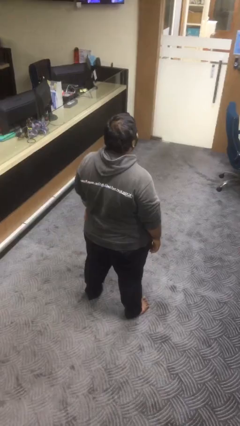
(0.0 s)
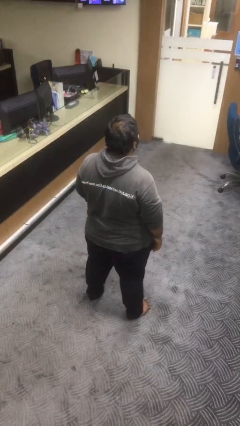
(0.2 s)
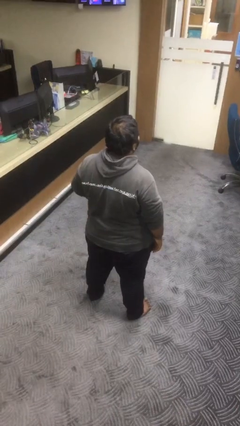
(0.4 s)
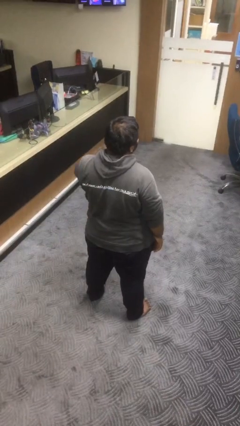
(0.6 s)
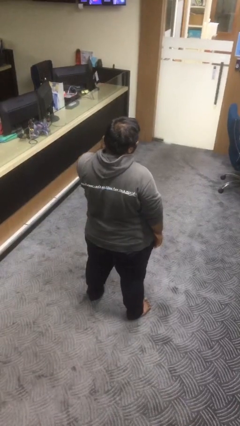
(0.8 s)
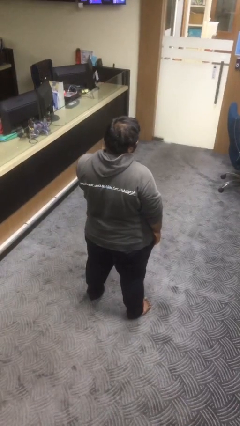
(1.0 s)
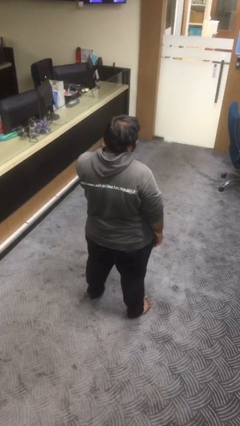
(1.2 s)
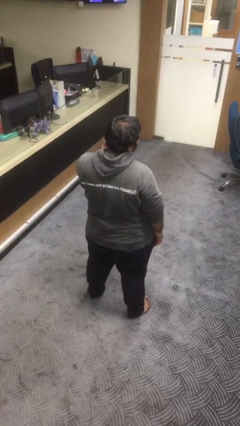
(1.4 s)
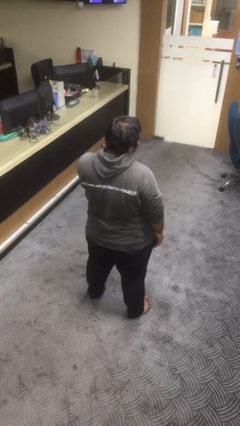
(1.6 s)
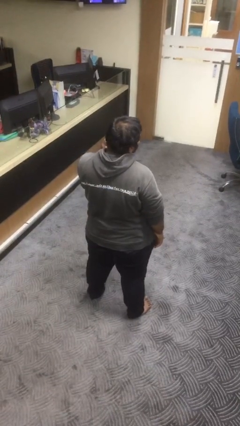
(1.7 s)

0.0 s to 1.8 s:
person rubs neck

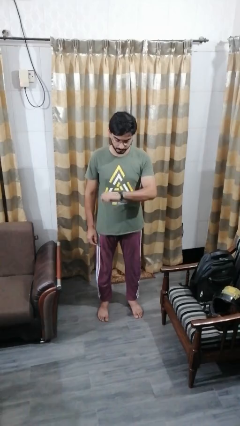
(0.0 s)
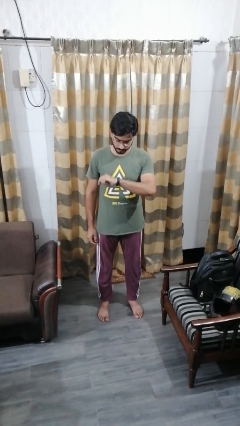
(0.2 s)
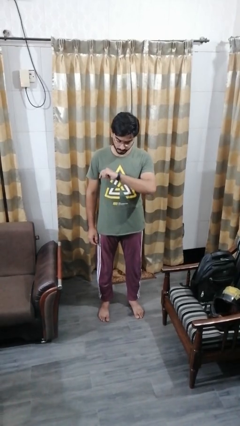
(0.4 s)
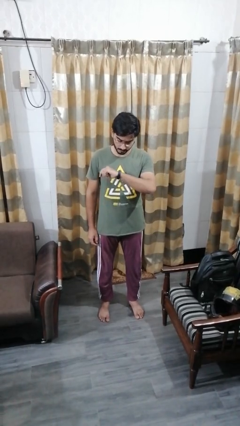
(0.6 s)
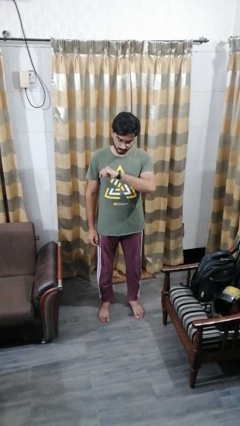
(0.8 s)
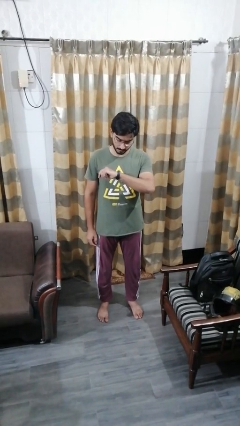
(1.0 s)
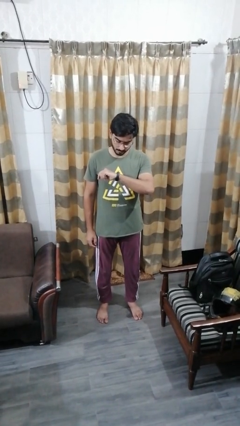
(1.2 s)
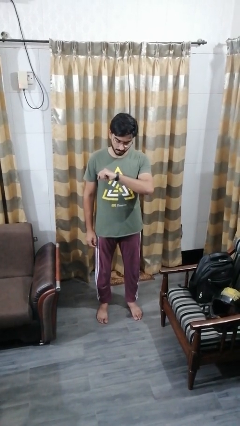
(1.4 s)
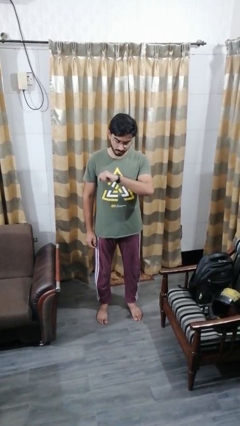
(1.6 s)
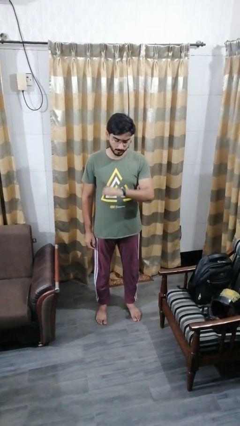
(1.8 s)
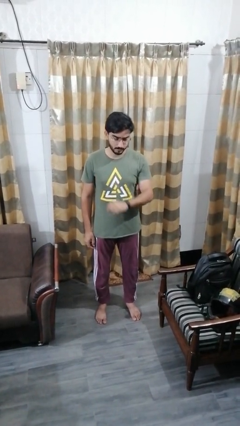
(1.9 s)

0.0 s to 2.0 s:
person looks at wristwatch

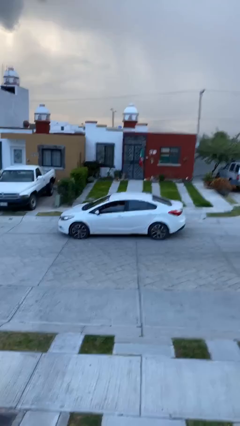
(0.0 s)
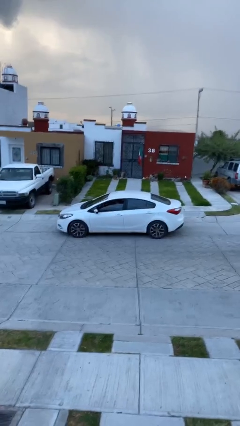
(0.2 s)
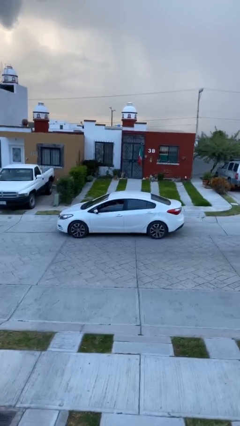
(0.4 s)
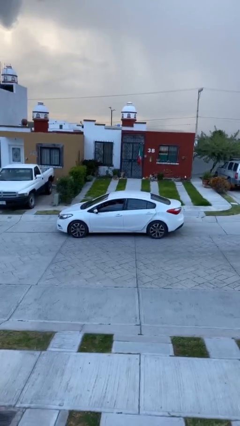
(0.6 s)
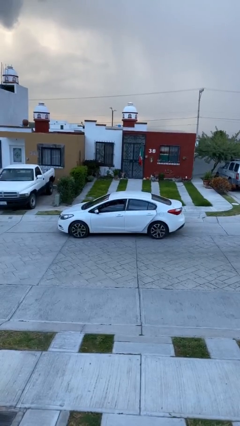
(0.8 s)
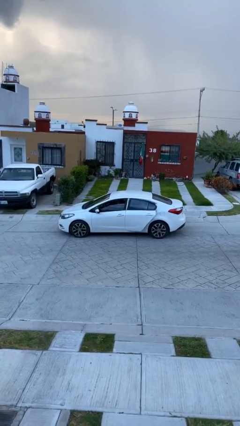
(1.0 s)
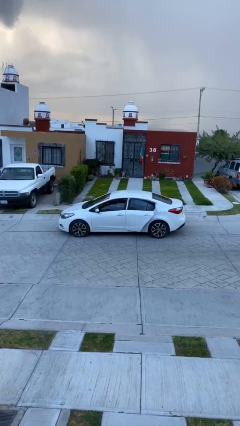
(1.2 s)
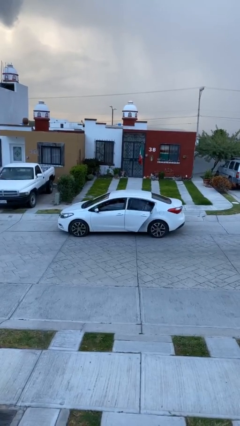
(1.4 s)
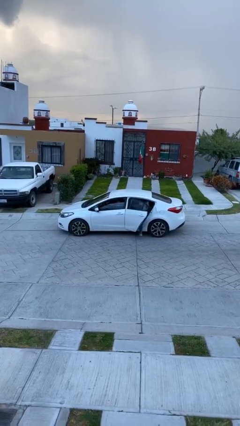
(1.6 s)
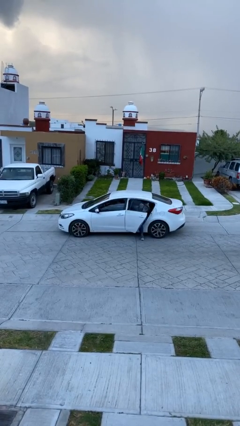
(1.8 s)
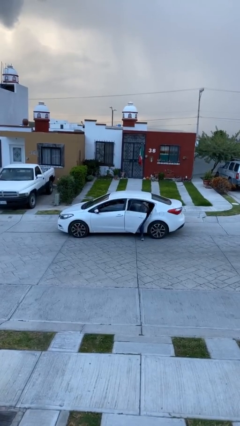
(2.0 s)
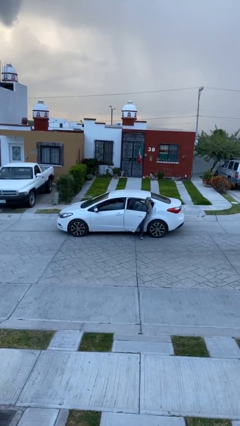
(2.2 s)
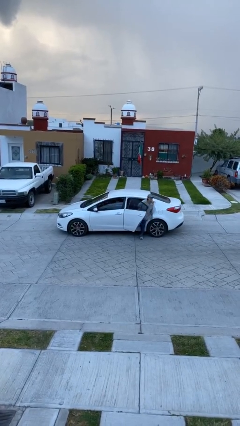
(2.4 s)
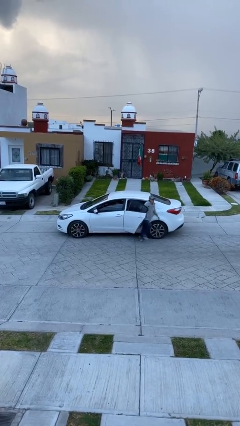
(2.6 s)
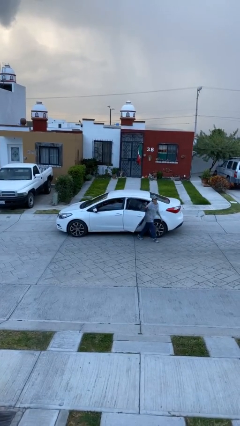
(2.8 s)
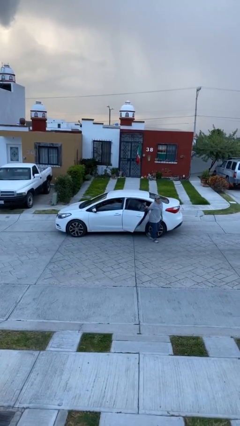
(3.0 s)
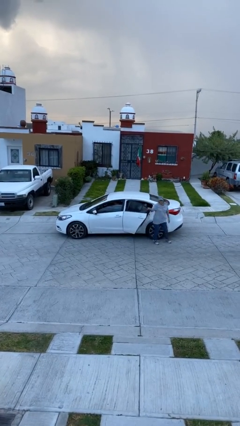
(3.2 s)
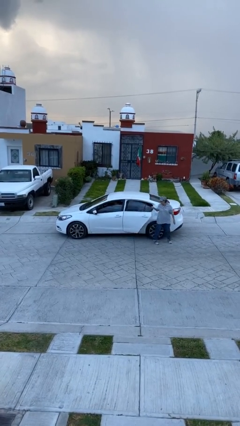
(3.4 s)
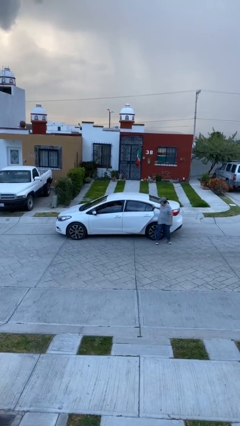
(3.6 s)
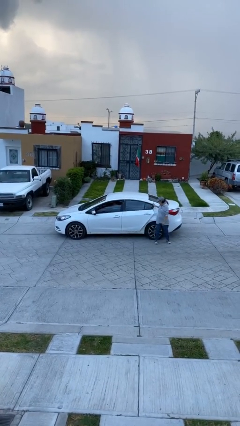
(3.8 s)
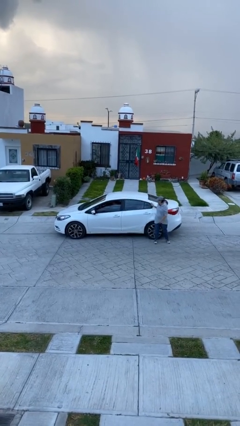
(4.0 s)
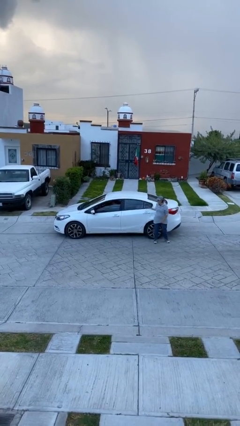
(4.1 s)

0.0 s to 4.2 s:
car drops off person

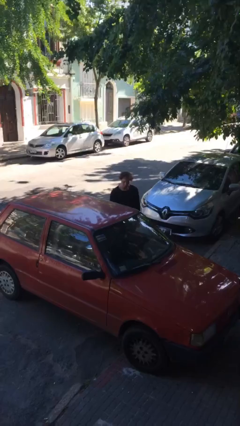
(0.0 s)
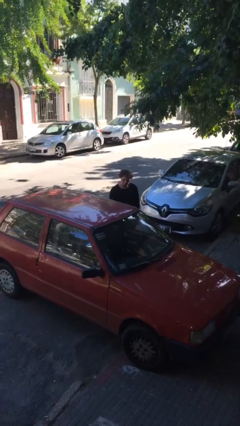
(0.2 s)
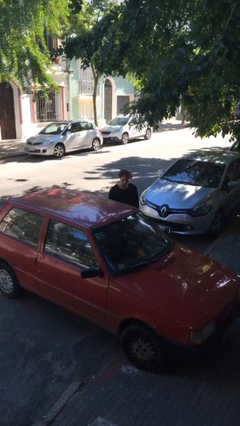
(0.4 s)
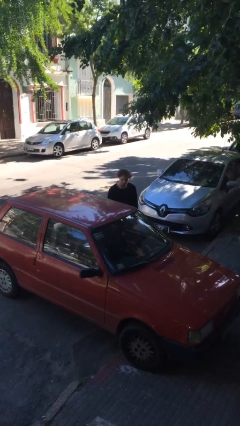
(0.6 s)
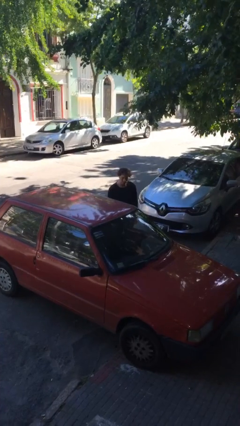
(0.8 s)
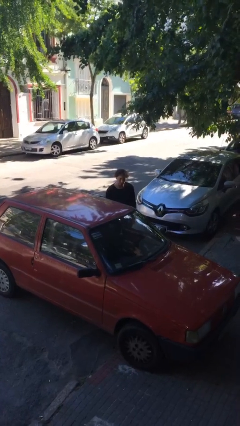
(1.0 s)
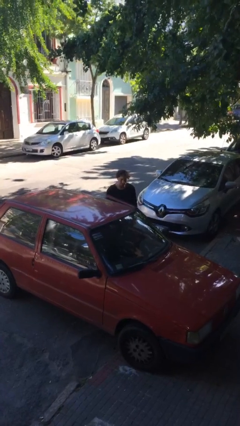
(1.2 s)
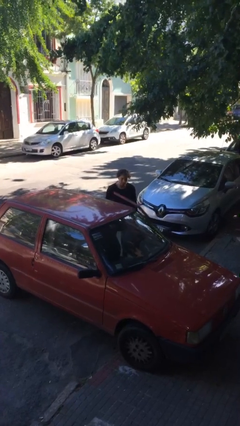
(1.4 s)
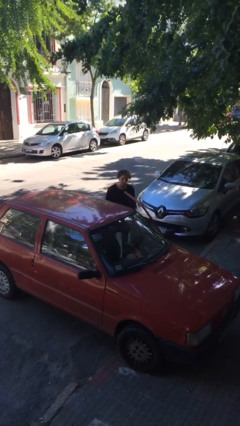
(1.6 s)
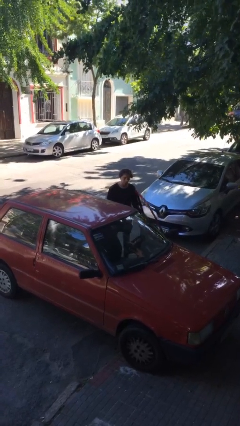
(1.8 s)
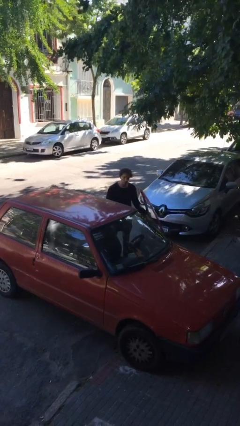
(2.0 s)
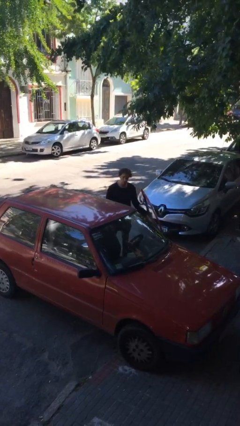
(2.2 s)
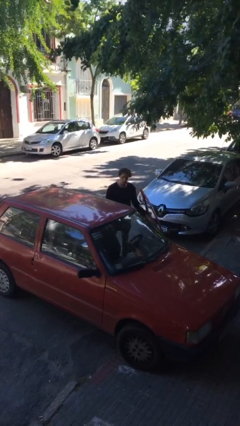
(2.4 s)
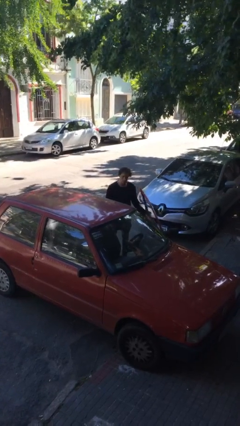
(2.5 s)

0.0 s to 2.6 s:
person opens car door

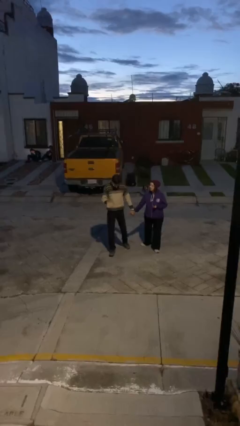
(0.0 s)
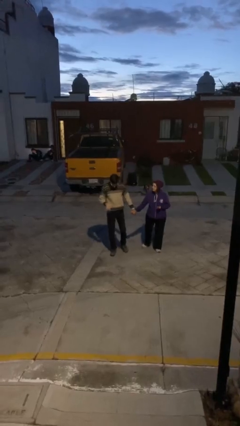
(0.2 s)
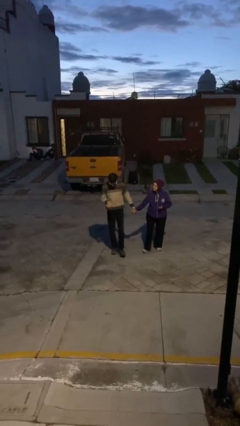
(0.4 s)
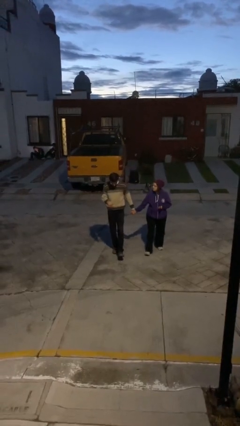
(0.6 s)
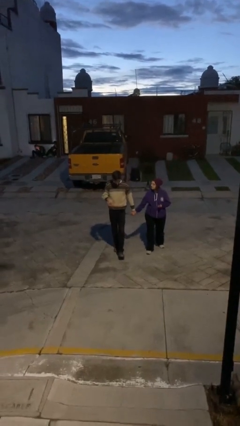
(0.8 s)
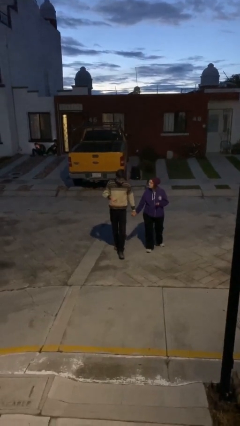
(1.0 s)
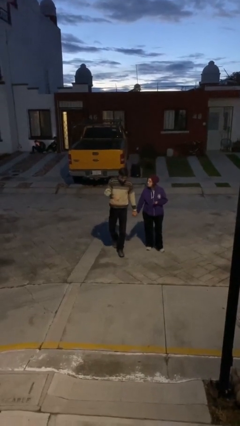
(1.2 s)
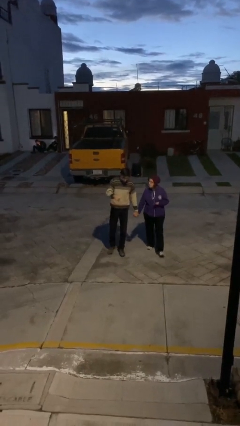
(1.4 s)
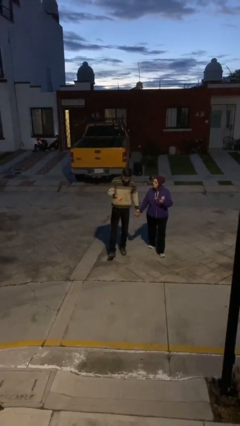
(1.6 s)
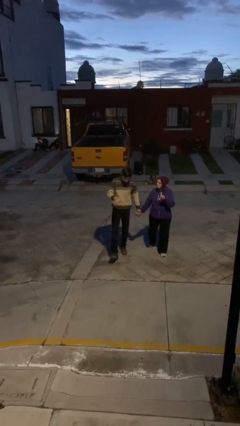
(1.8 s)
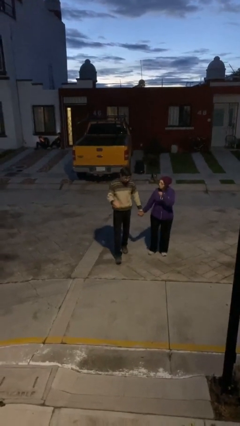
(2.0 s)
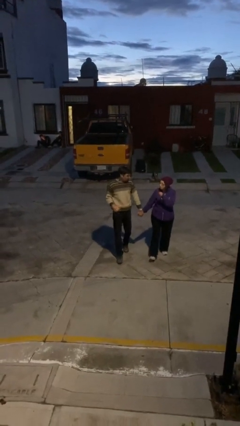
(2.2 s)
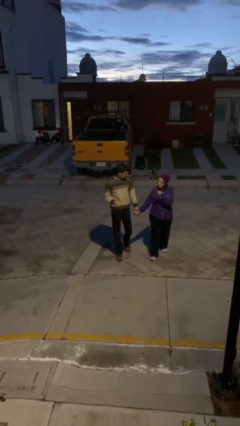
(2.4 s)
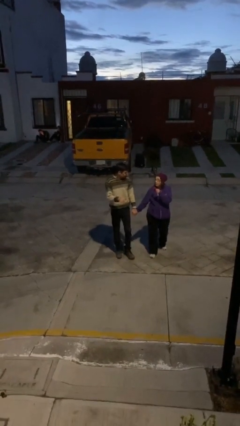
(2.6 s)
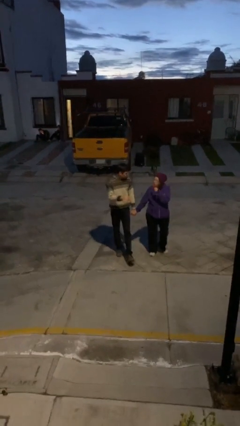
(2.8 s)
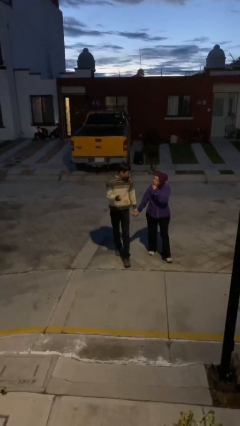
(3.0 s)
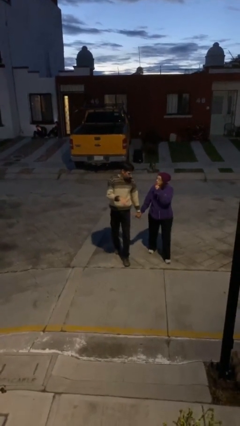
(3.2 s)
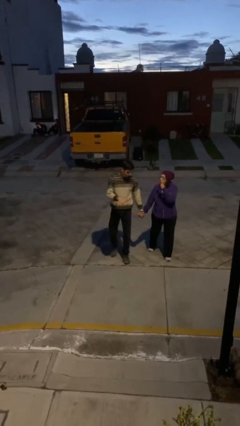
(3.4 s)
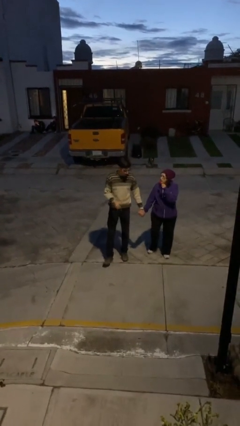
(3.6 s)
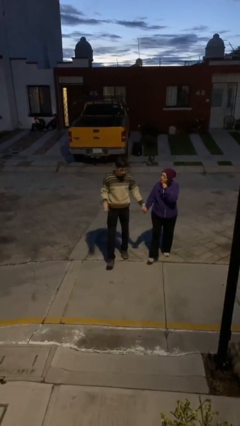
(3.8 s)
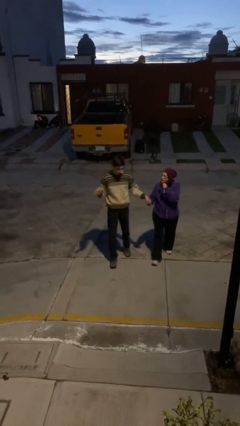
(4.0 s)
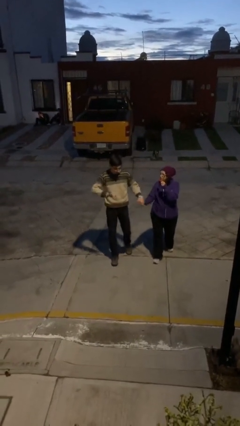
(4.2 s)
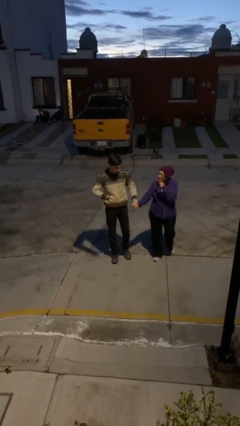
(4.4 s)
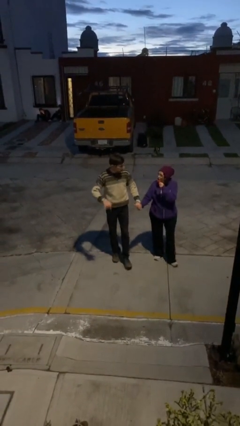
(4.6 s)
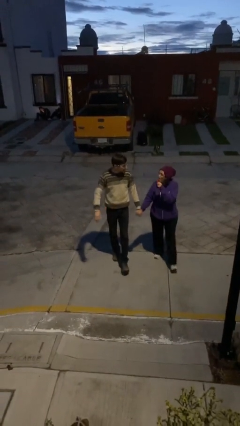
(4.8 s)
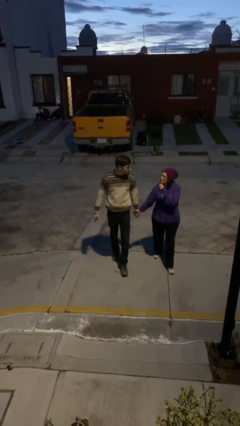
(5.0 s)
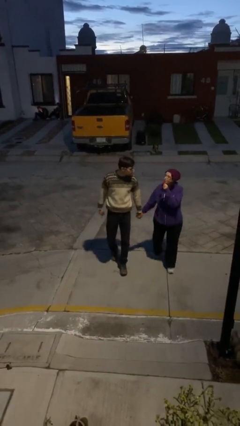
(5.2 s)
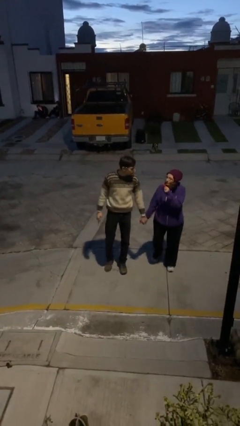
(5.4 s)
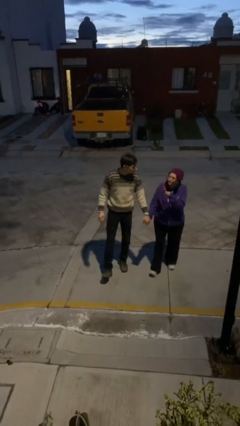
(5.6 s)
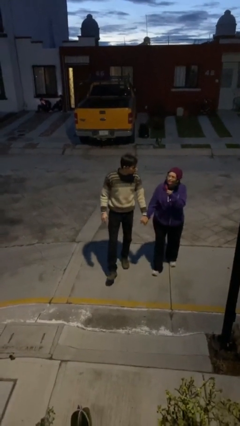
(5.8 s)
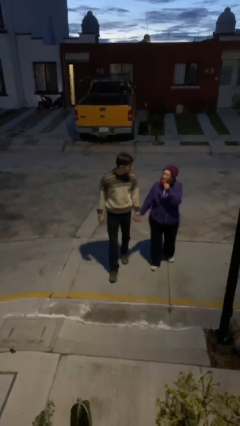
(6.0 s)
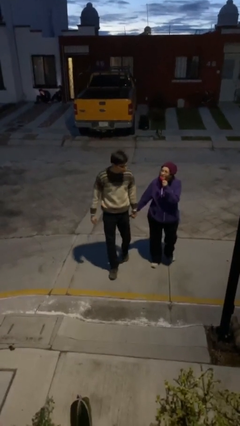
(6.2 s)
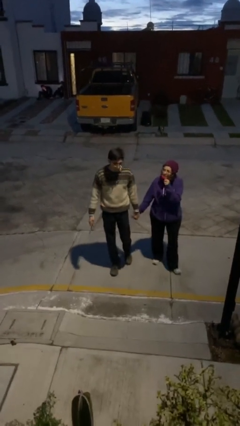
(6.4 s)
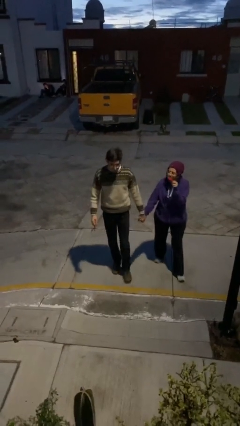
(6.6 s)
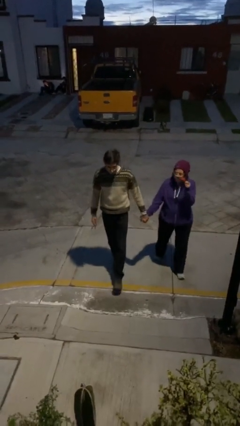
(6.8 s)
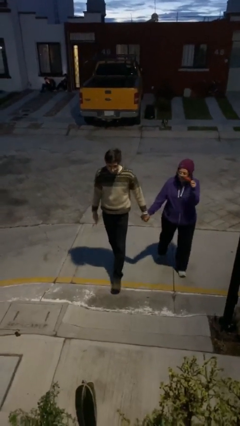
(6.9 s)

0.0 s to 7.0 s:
person holds hand
